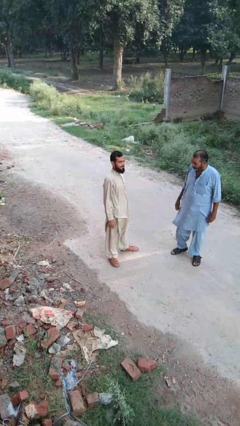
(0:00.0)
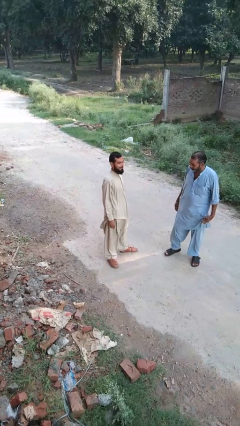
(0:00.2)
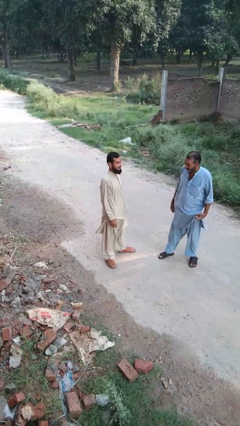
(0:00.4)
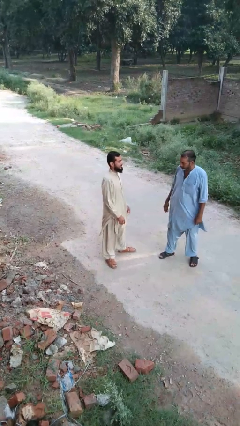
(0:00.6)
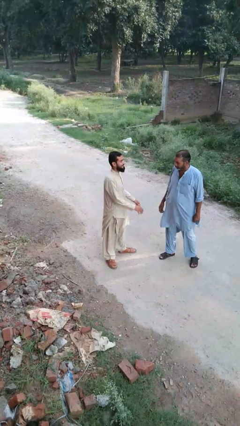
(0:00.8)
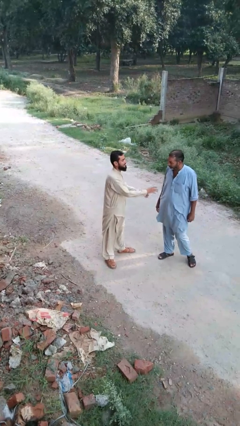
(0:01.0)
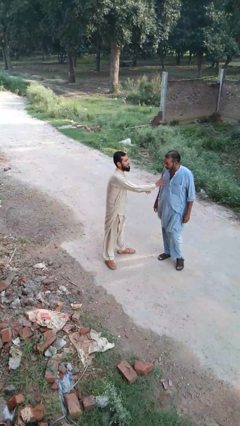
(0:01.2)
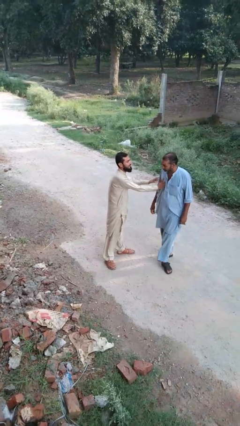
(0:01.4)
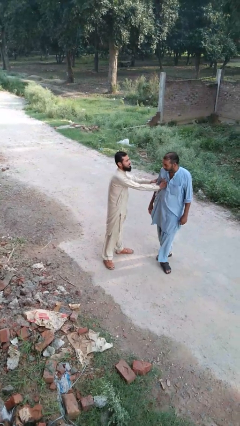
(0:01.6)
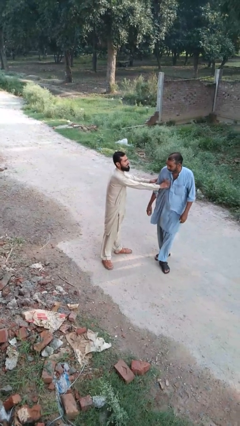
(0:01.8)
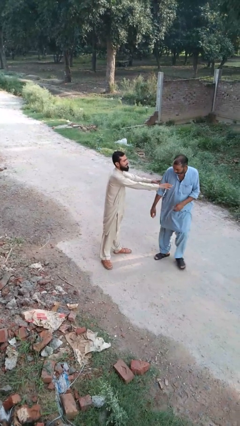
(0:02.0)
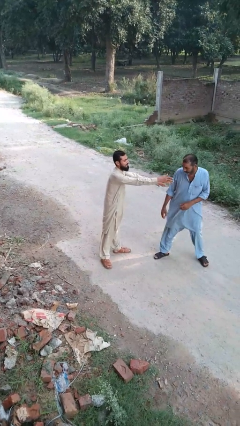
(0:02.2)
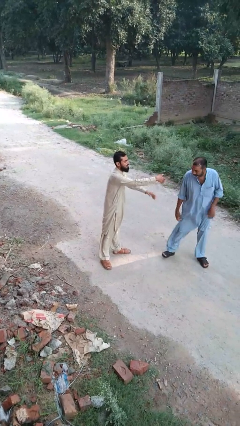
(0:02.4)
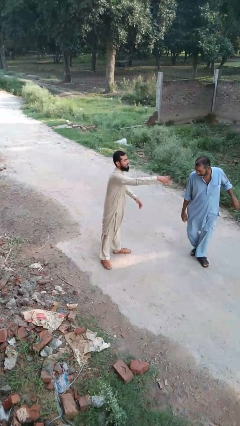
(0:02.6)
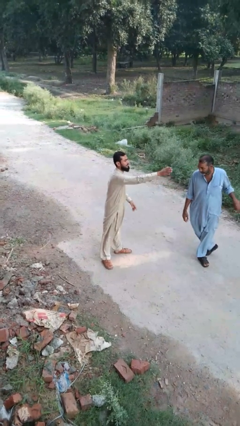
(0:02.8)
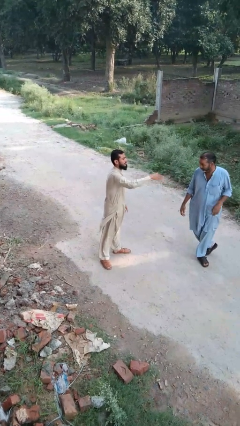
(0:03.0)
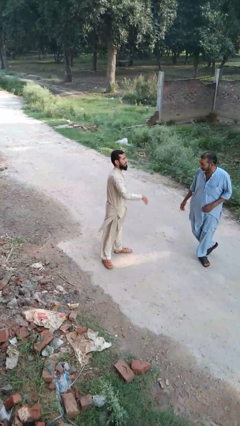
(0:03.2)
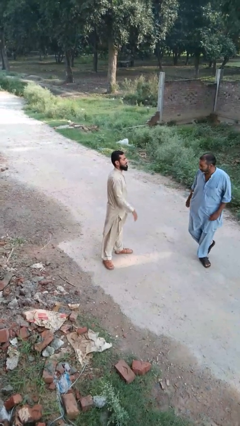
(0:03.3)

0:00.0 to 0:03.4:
person shoves person

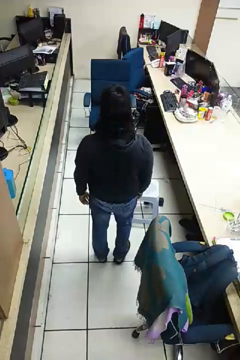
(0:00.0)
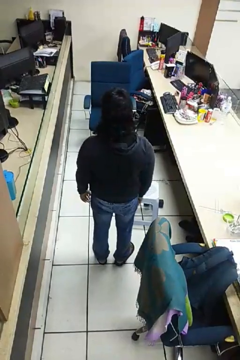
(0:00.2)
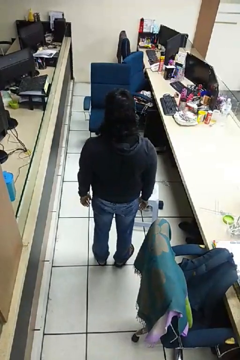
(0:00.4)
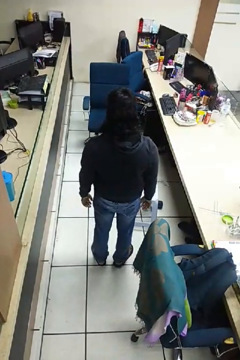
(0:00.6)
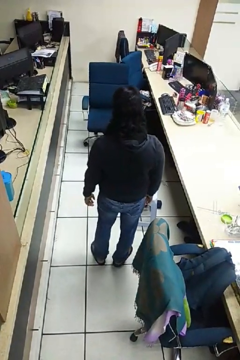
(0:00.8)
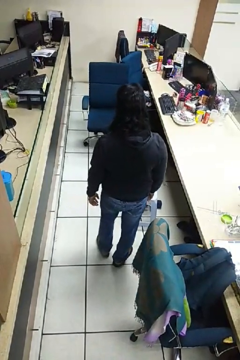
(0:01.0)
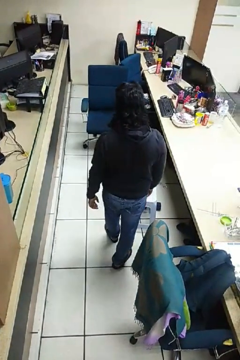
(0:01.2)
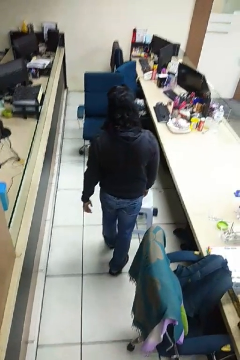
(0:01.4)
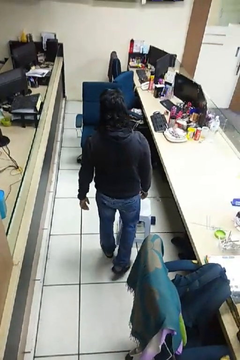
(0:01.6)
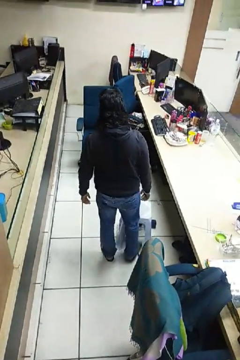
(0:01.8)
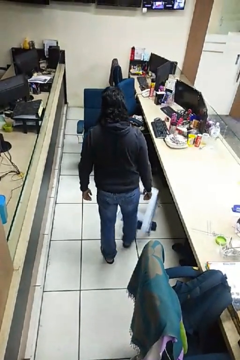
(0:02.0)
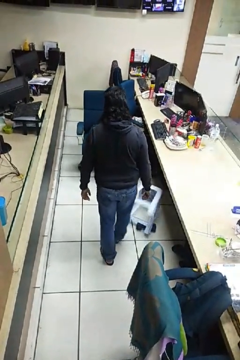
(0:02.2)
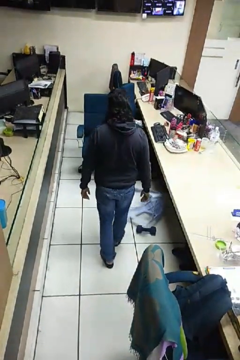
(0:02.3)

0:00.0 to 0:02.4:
person knocks over furniture

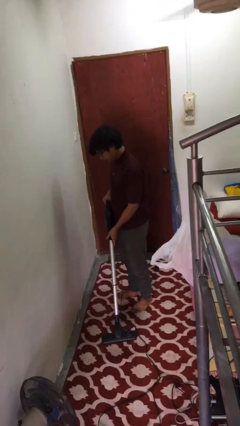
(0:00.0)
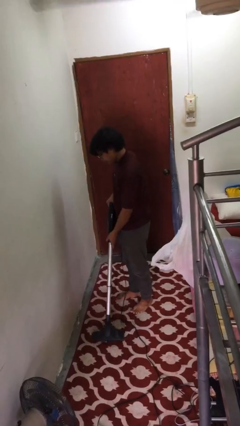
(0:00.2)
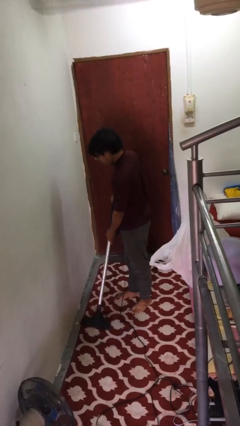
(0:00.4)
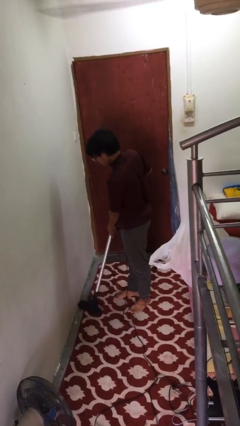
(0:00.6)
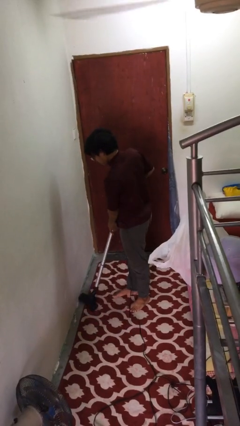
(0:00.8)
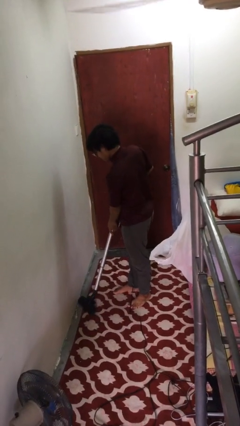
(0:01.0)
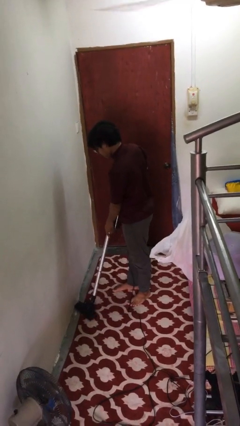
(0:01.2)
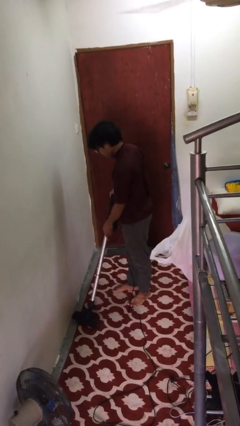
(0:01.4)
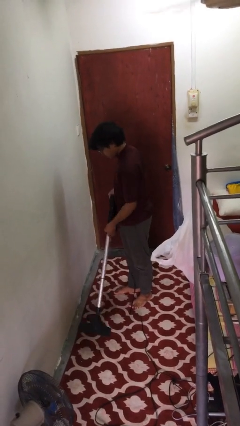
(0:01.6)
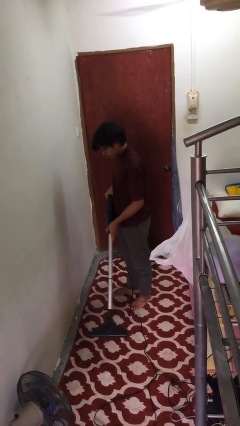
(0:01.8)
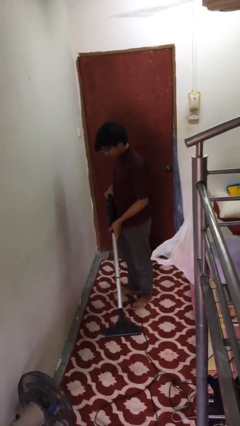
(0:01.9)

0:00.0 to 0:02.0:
person vacuums carpet

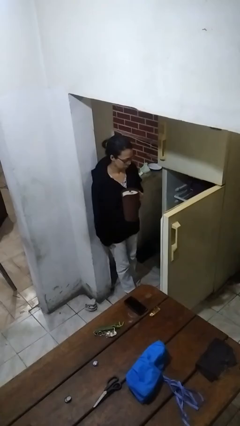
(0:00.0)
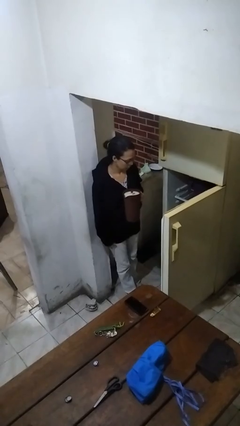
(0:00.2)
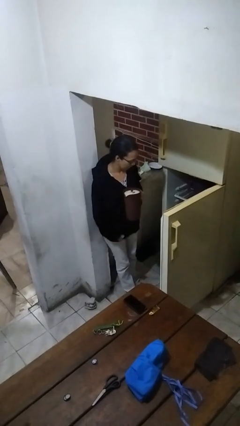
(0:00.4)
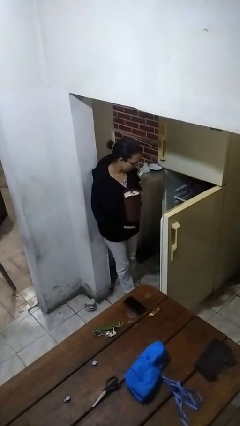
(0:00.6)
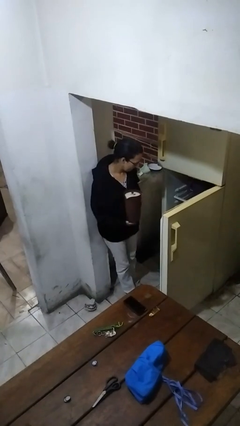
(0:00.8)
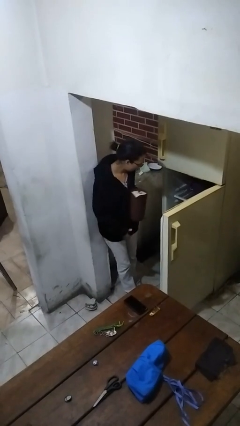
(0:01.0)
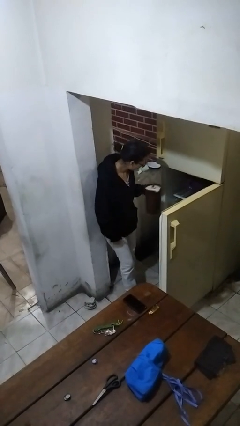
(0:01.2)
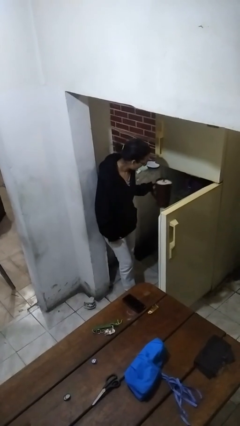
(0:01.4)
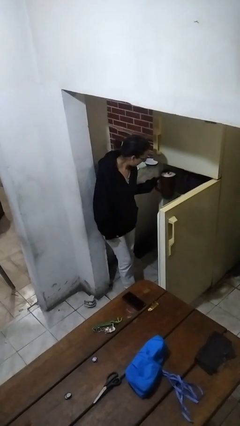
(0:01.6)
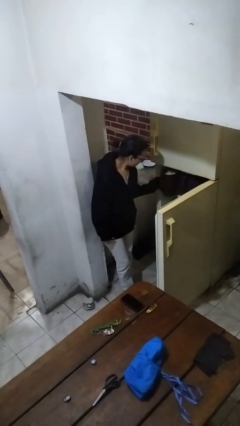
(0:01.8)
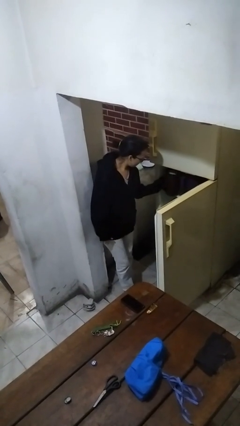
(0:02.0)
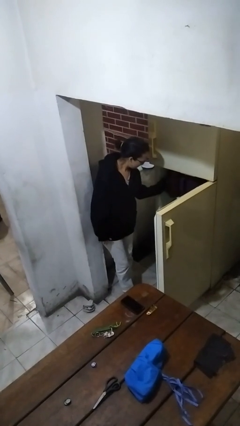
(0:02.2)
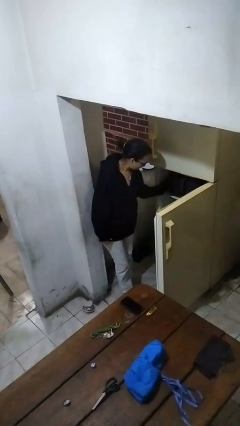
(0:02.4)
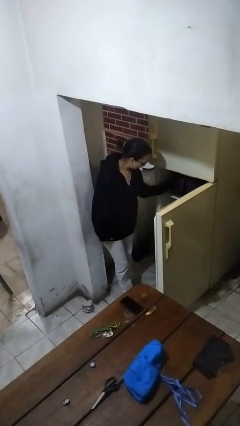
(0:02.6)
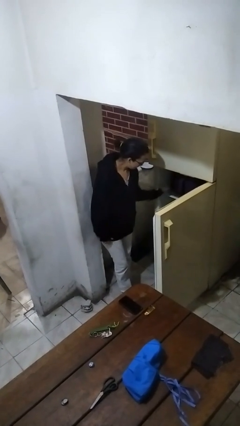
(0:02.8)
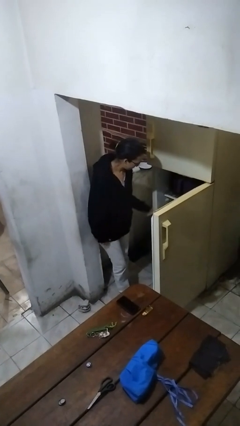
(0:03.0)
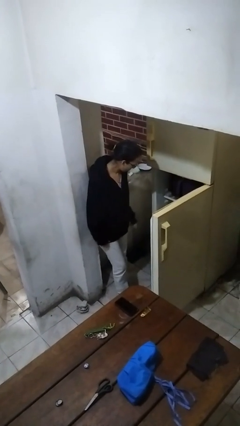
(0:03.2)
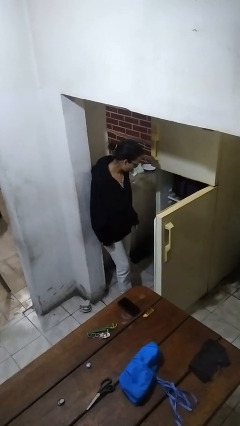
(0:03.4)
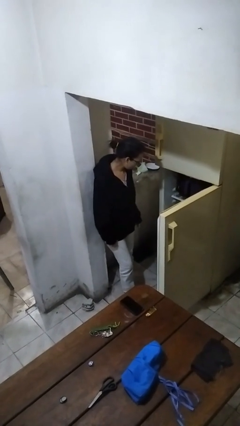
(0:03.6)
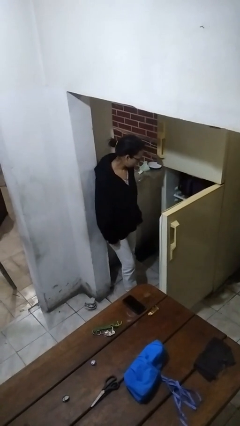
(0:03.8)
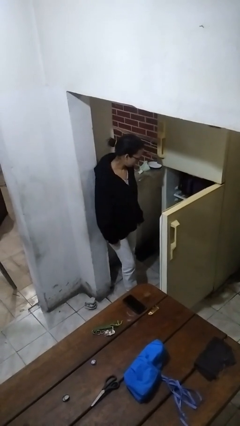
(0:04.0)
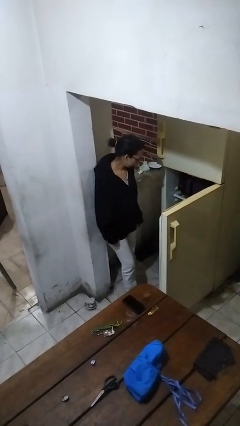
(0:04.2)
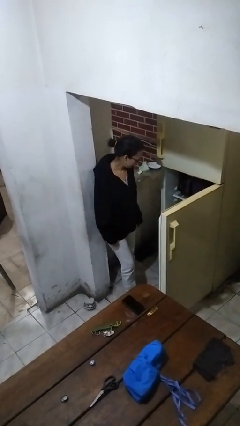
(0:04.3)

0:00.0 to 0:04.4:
person puts object into refrigerator

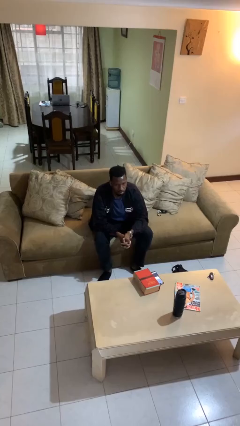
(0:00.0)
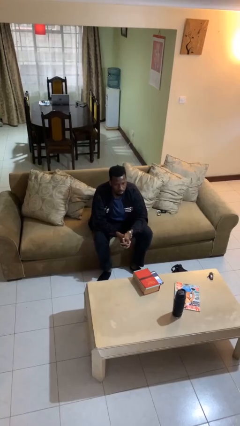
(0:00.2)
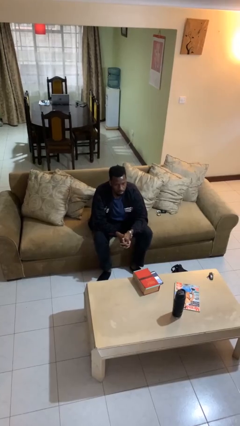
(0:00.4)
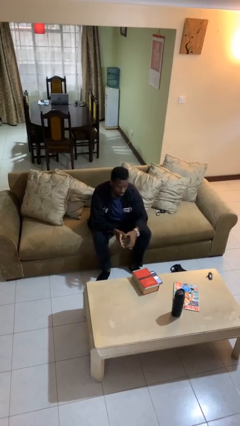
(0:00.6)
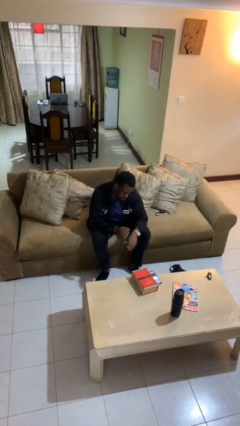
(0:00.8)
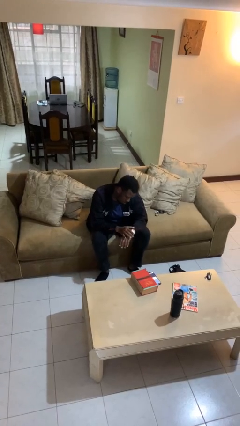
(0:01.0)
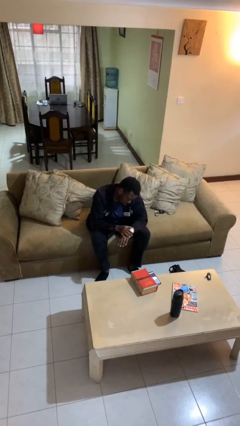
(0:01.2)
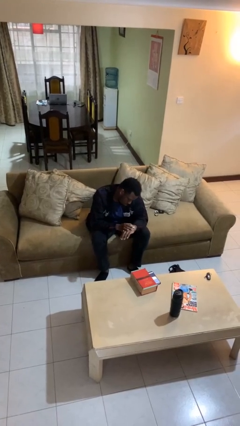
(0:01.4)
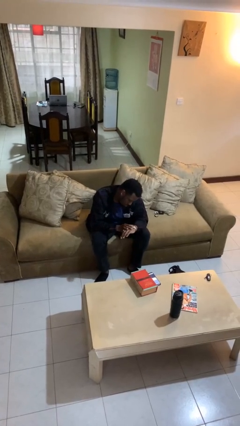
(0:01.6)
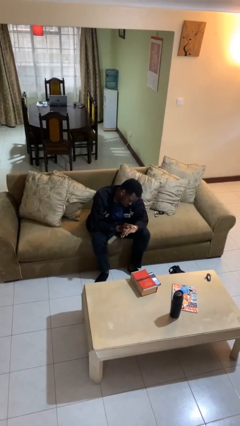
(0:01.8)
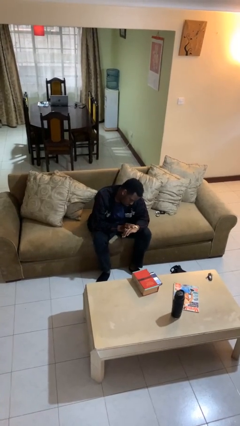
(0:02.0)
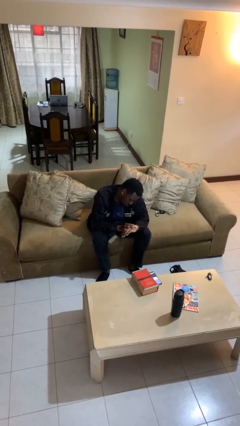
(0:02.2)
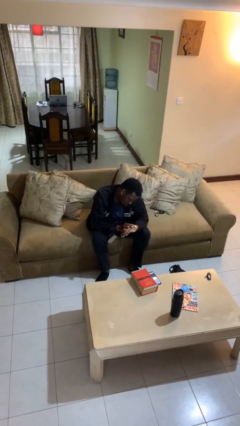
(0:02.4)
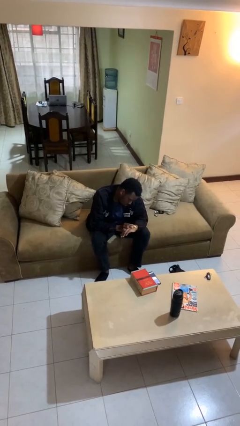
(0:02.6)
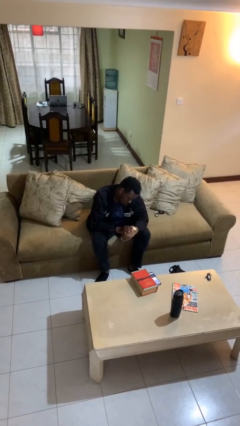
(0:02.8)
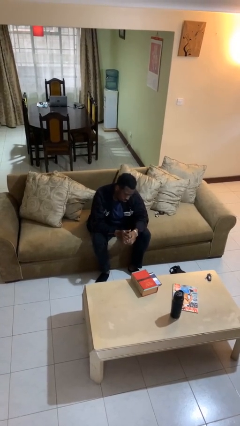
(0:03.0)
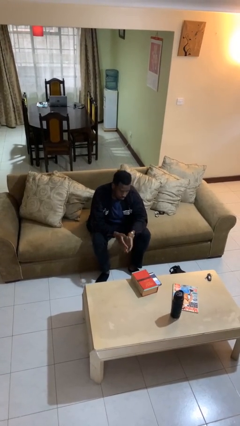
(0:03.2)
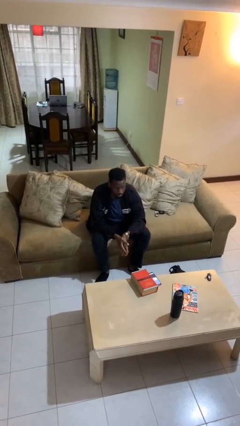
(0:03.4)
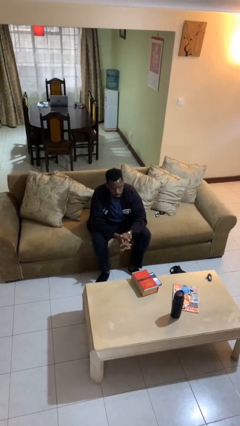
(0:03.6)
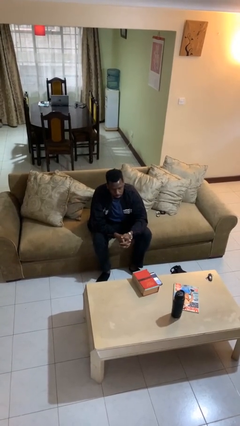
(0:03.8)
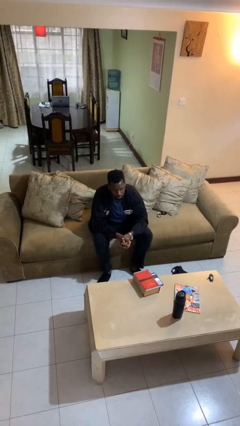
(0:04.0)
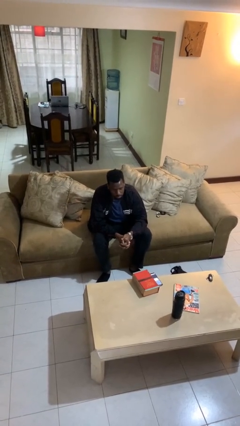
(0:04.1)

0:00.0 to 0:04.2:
person looks at wristwatch

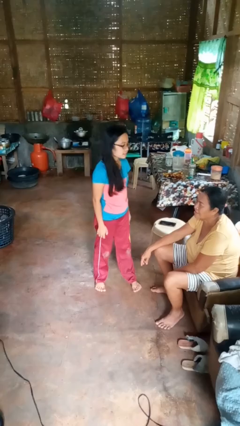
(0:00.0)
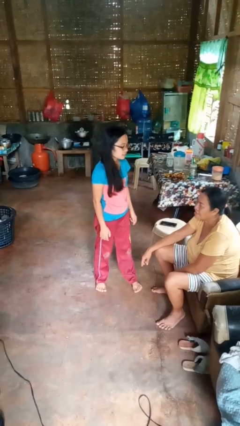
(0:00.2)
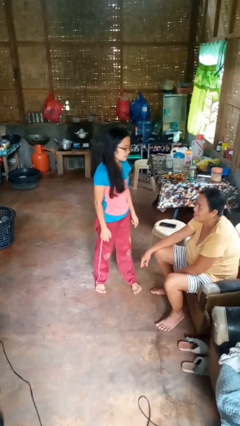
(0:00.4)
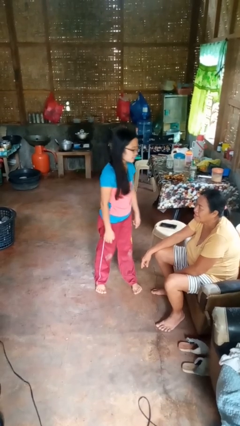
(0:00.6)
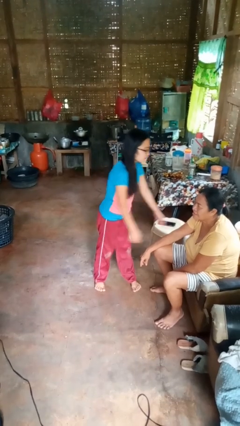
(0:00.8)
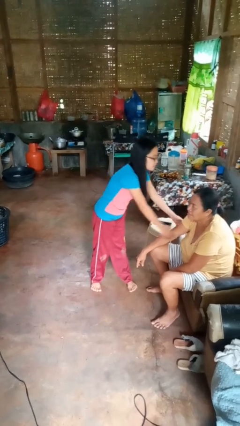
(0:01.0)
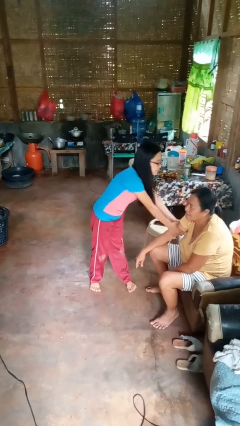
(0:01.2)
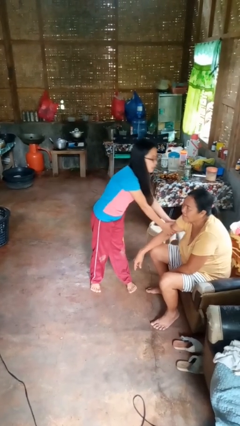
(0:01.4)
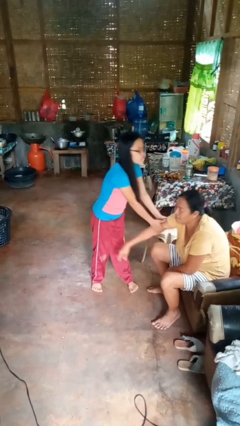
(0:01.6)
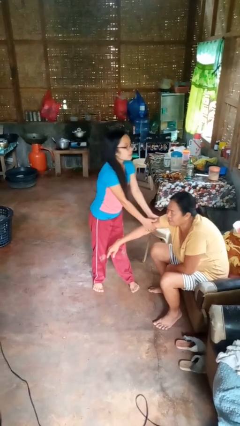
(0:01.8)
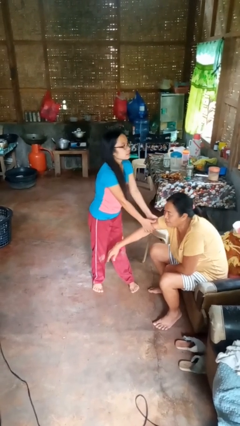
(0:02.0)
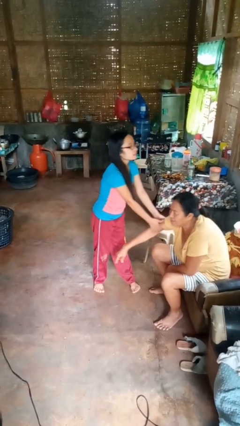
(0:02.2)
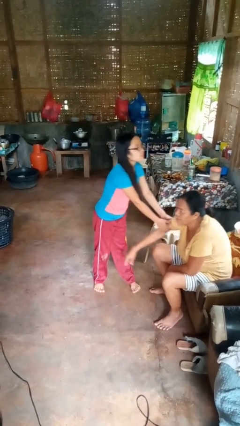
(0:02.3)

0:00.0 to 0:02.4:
person grabs person by bicep
